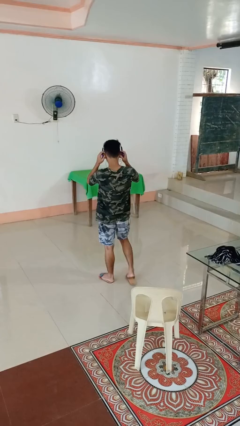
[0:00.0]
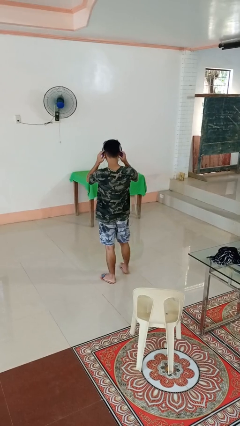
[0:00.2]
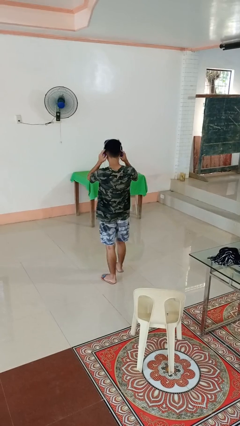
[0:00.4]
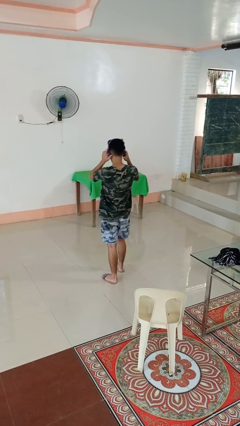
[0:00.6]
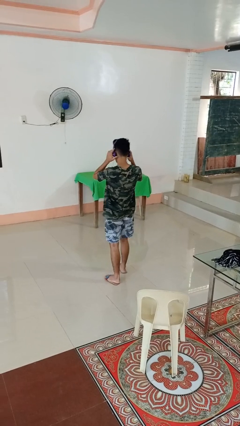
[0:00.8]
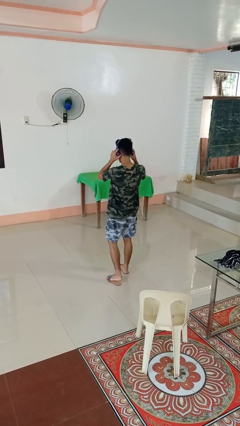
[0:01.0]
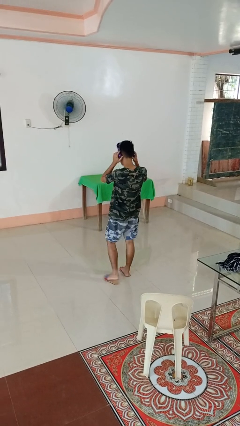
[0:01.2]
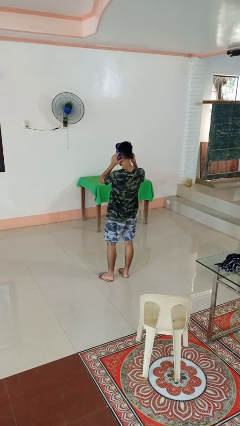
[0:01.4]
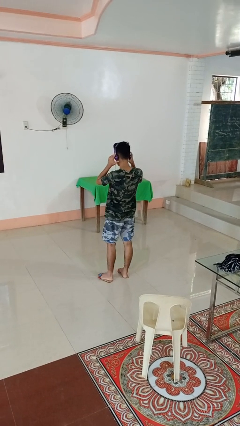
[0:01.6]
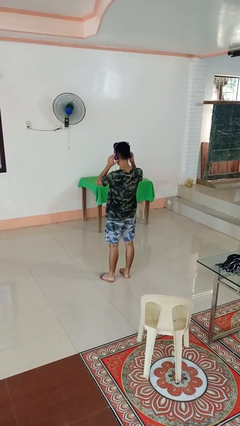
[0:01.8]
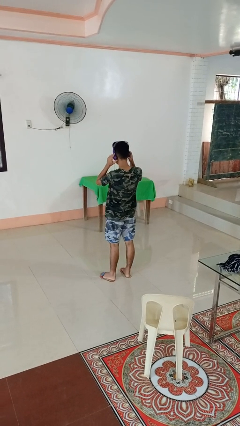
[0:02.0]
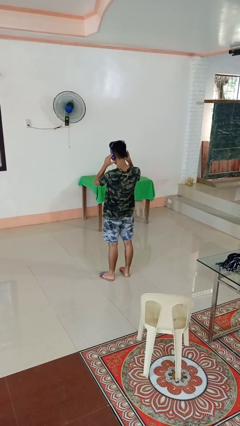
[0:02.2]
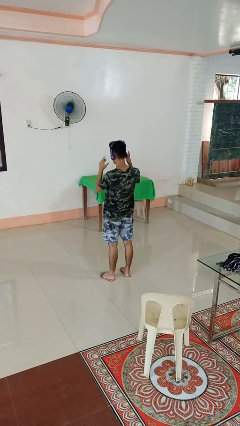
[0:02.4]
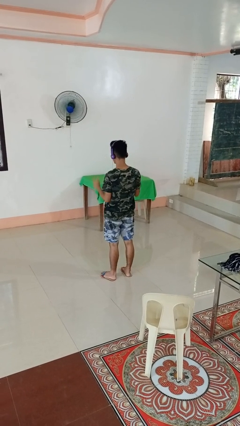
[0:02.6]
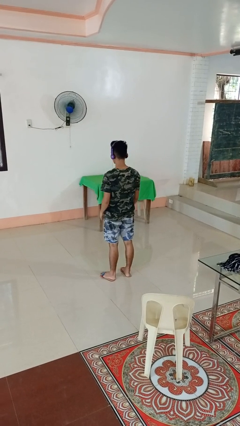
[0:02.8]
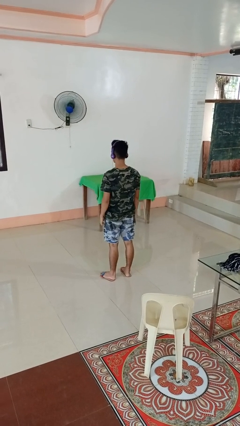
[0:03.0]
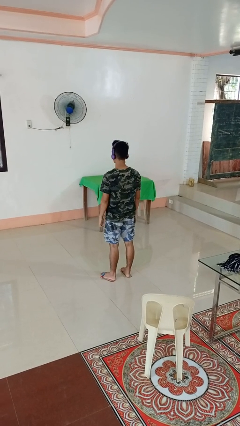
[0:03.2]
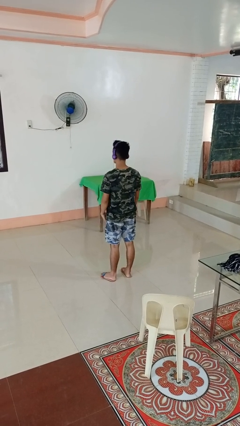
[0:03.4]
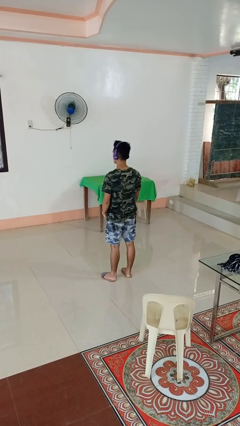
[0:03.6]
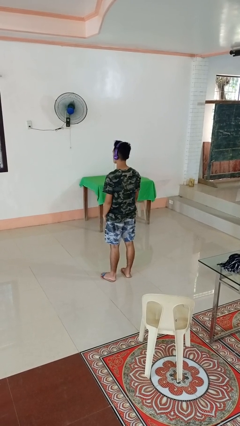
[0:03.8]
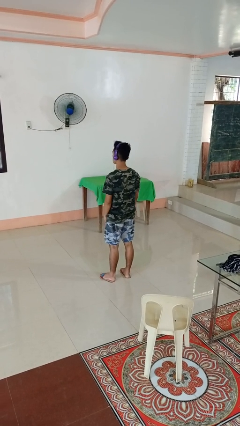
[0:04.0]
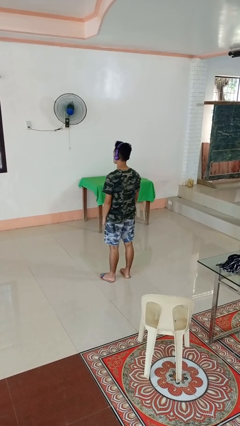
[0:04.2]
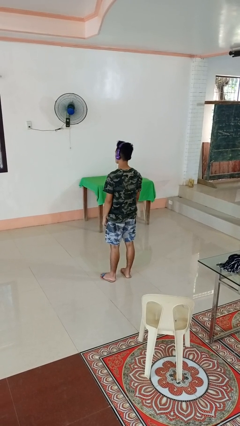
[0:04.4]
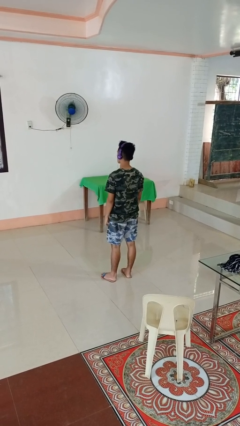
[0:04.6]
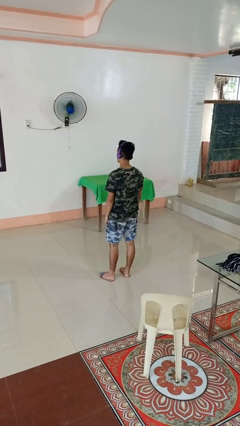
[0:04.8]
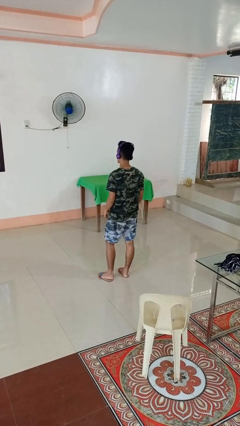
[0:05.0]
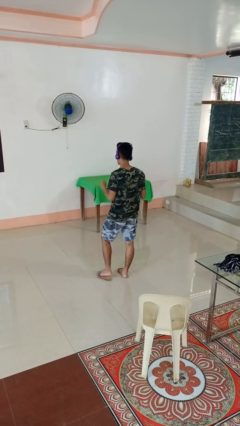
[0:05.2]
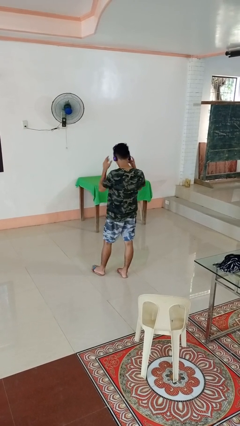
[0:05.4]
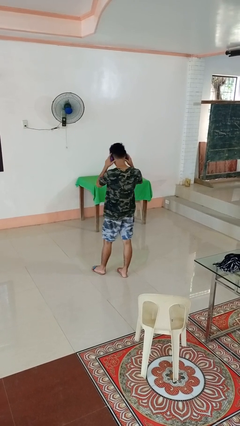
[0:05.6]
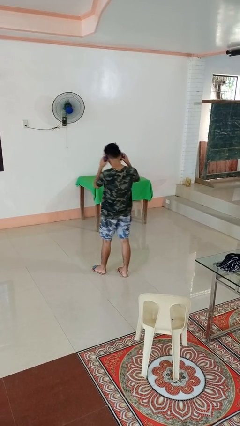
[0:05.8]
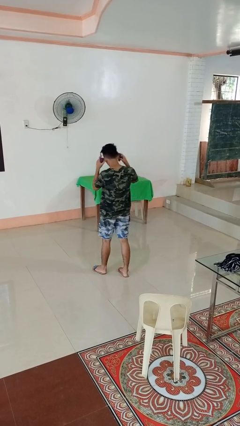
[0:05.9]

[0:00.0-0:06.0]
person puts on headphones

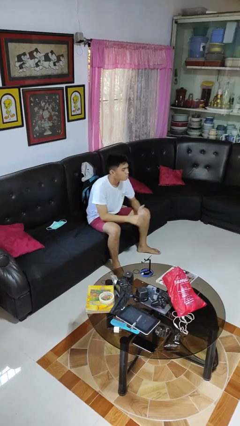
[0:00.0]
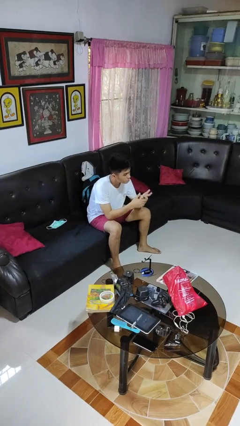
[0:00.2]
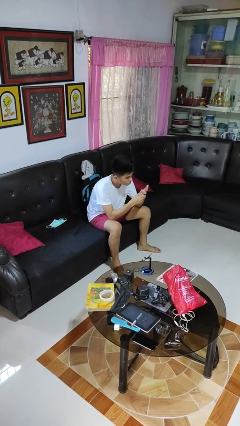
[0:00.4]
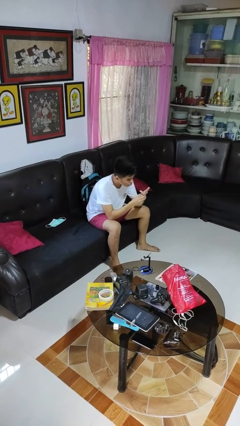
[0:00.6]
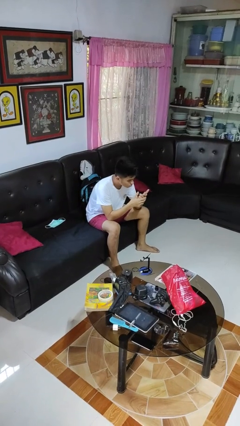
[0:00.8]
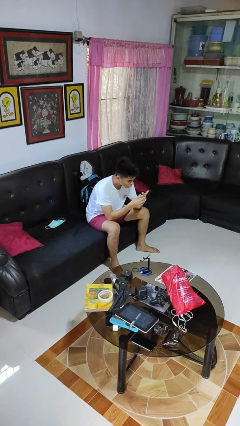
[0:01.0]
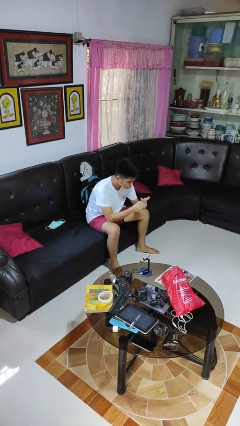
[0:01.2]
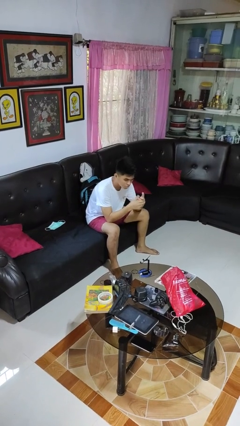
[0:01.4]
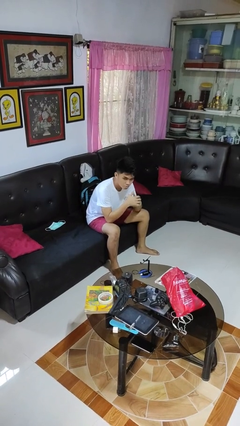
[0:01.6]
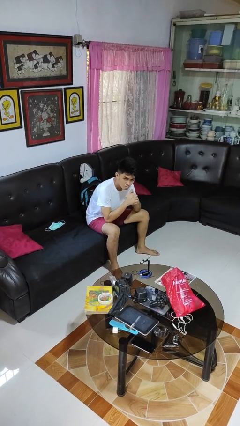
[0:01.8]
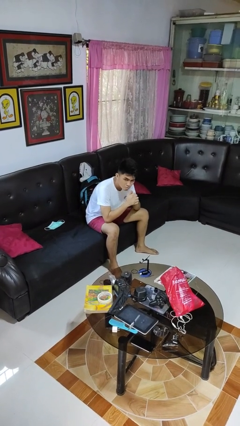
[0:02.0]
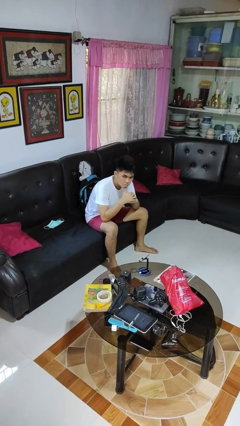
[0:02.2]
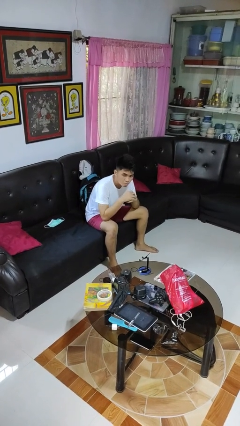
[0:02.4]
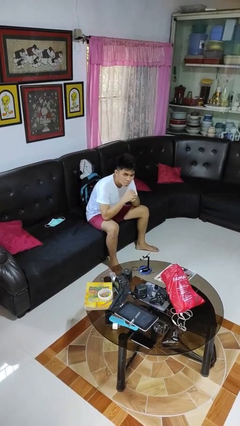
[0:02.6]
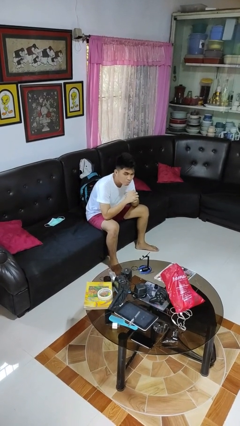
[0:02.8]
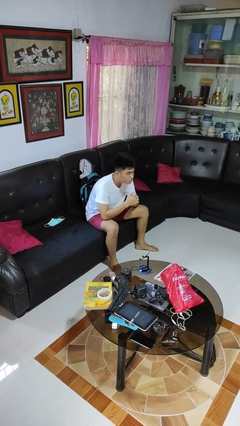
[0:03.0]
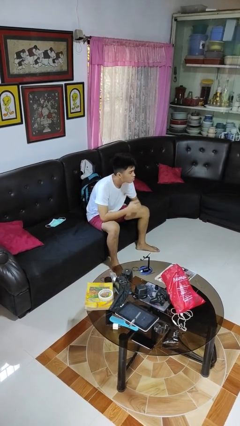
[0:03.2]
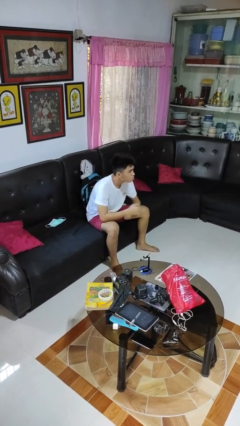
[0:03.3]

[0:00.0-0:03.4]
person cracks knuckles

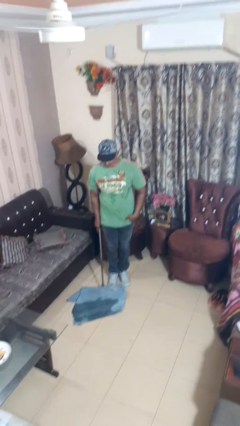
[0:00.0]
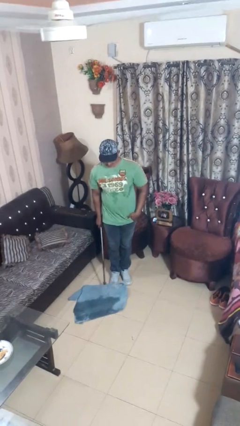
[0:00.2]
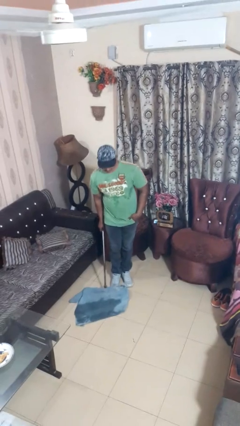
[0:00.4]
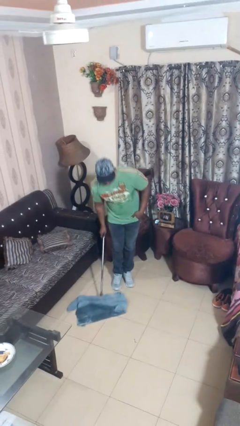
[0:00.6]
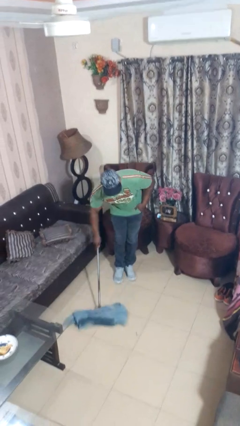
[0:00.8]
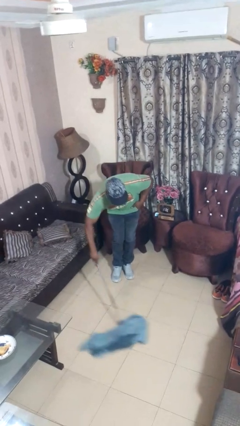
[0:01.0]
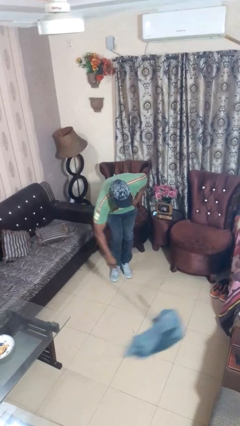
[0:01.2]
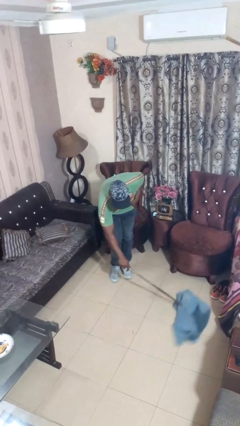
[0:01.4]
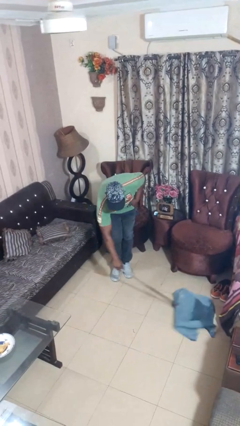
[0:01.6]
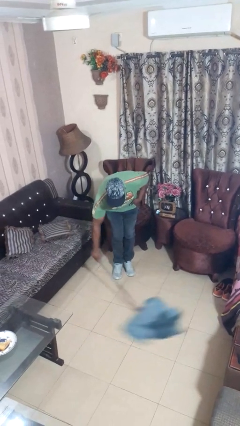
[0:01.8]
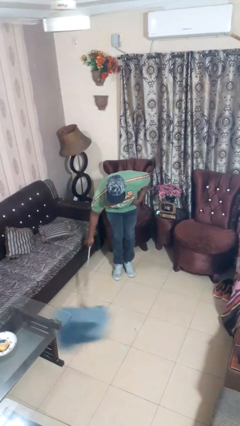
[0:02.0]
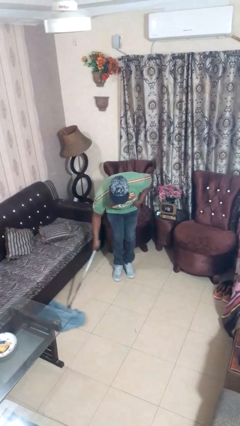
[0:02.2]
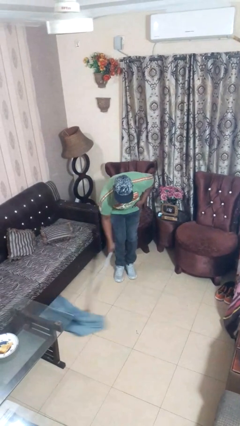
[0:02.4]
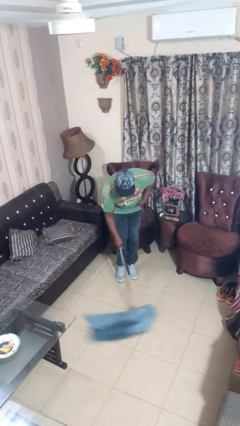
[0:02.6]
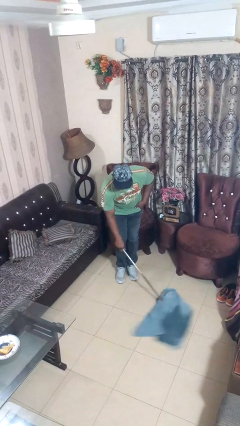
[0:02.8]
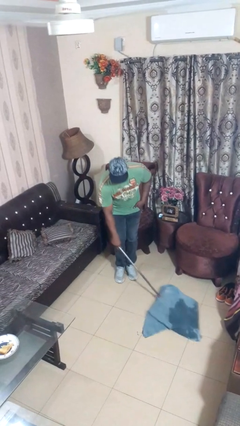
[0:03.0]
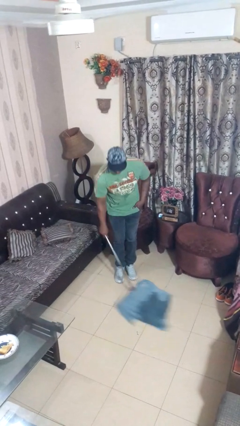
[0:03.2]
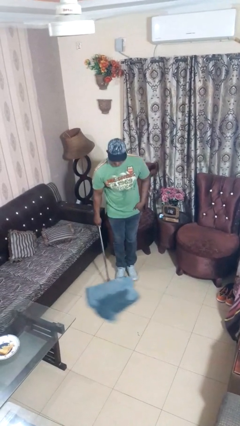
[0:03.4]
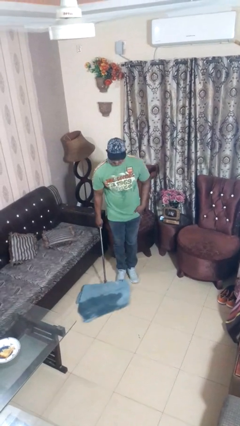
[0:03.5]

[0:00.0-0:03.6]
person mops

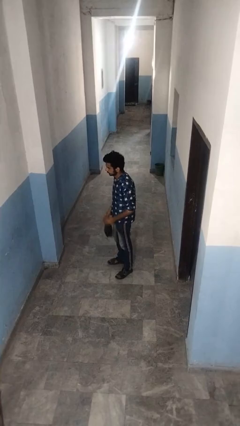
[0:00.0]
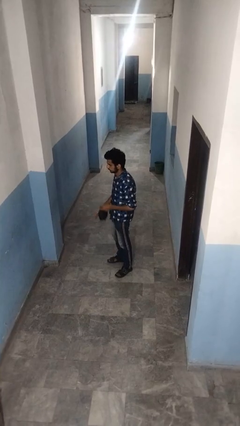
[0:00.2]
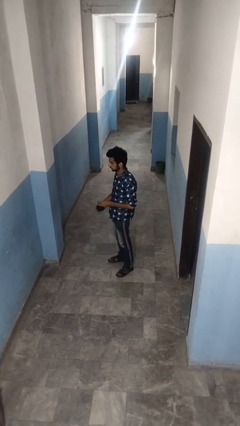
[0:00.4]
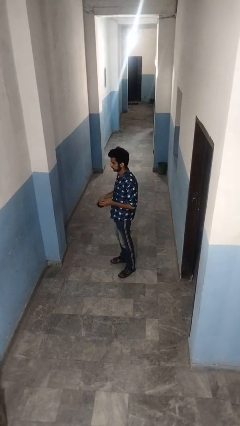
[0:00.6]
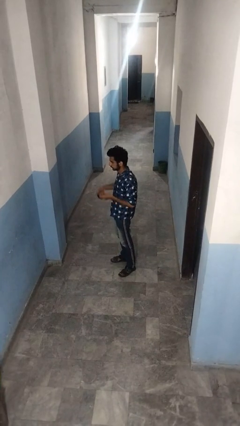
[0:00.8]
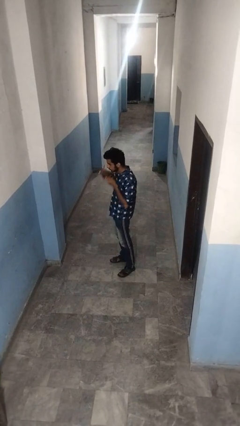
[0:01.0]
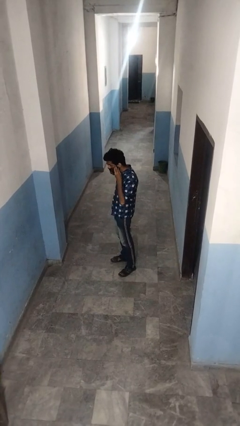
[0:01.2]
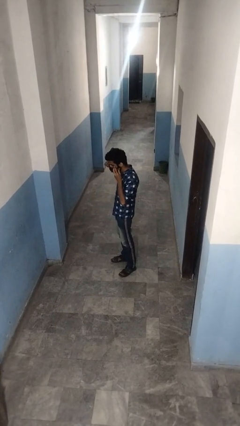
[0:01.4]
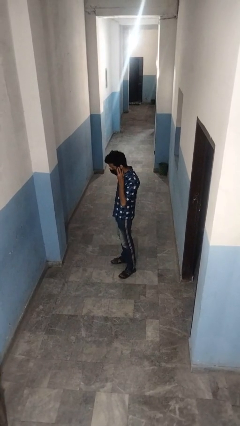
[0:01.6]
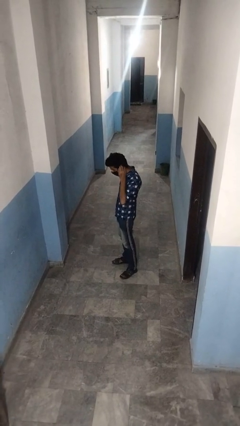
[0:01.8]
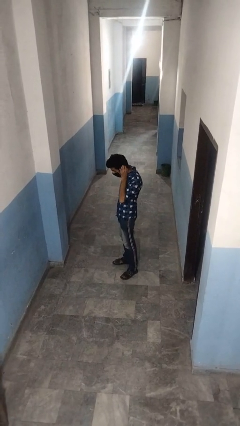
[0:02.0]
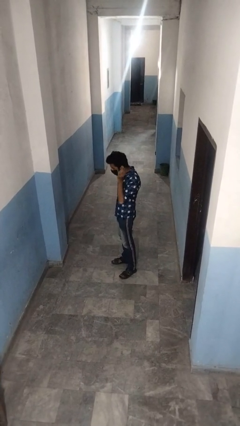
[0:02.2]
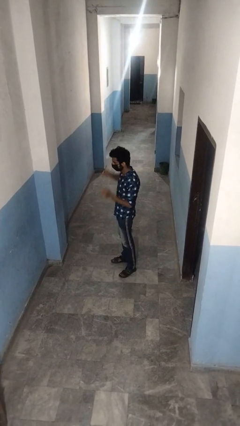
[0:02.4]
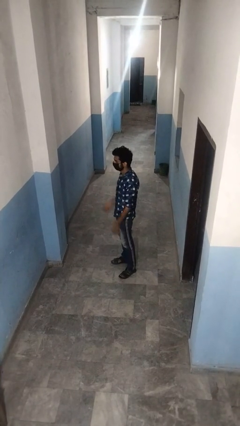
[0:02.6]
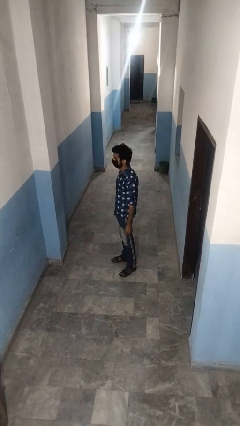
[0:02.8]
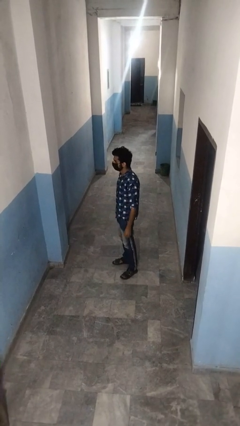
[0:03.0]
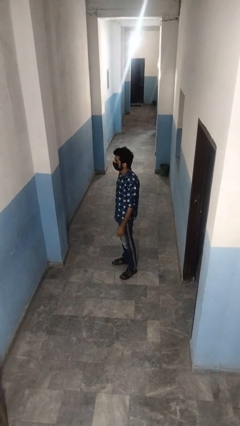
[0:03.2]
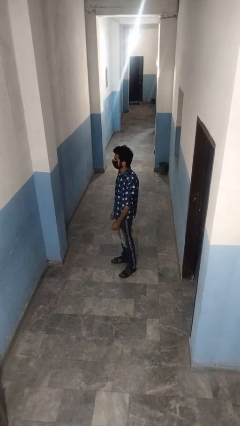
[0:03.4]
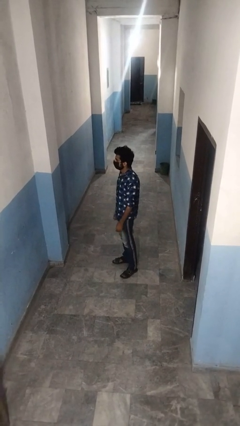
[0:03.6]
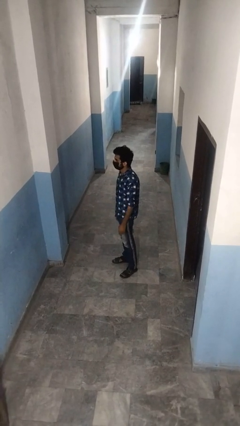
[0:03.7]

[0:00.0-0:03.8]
person puts on facemask

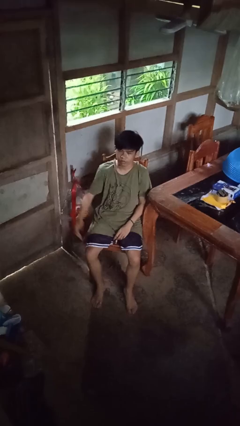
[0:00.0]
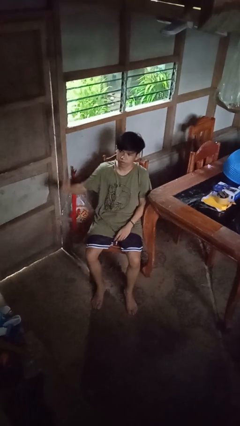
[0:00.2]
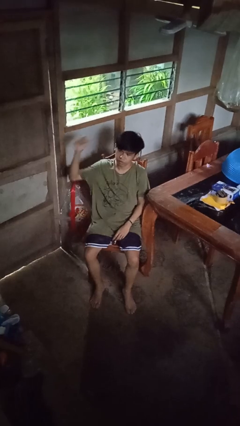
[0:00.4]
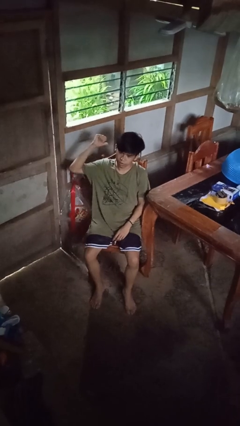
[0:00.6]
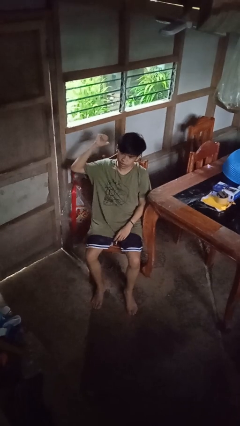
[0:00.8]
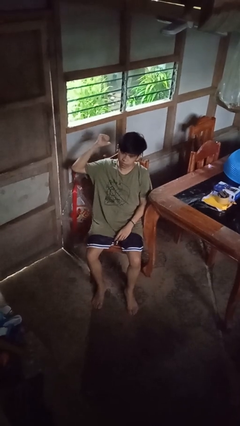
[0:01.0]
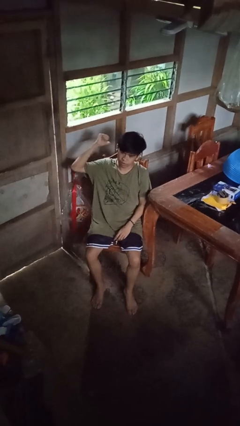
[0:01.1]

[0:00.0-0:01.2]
person gestures behind me
